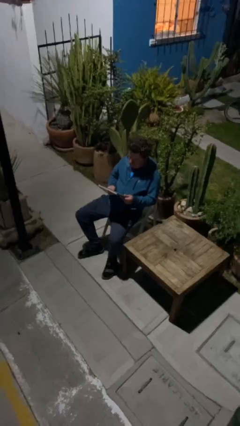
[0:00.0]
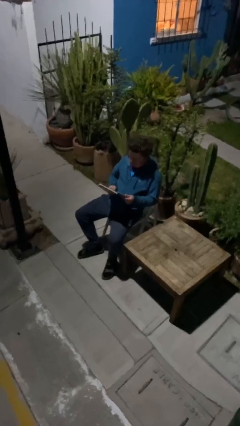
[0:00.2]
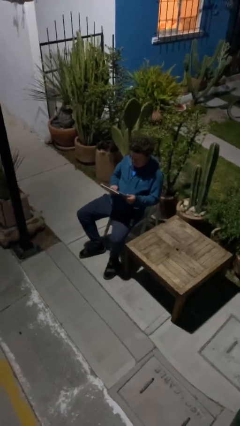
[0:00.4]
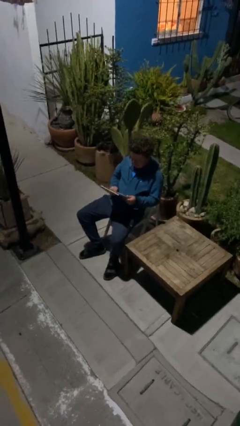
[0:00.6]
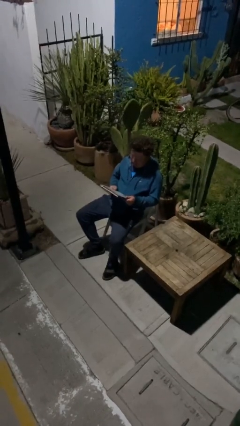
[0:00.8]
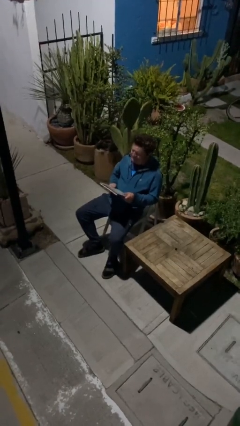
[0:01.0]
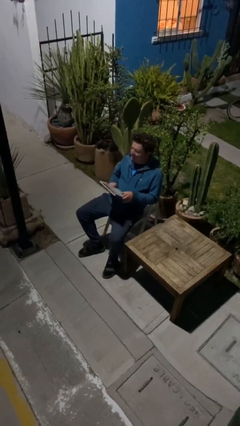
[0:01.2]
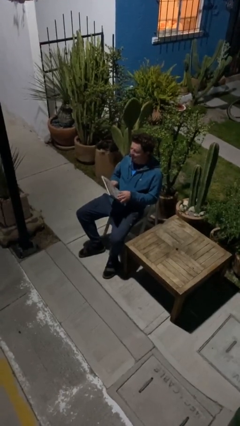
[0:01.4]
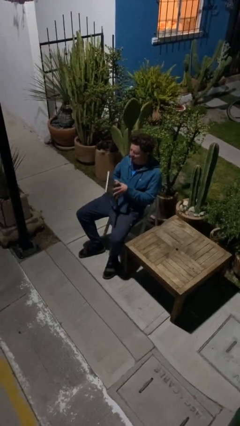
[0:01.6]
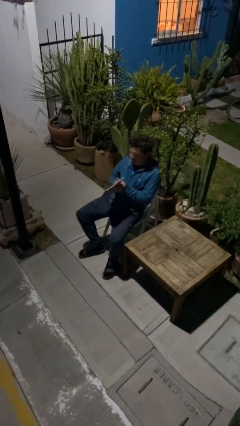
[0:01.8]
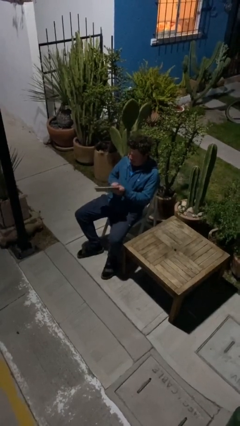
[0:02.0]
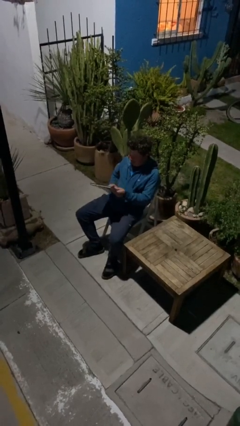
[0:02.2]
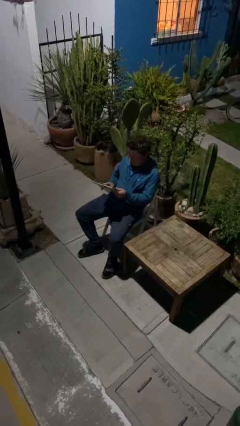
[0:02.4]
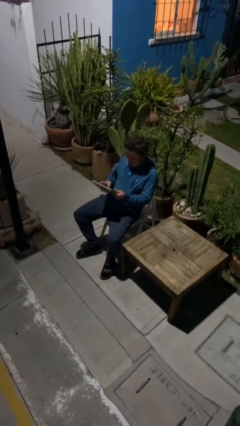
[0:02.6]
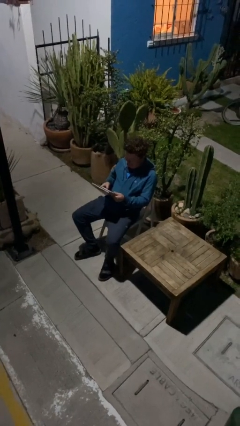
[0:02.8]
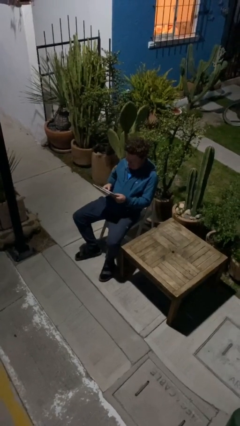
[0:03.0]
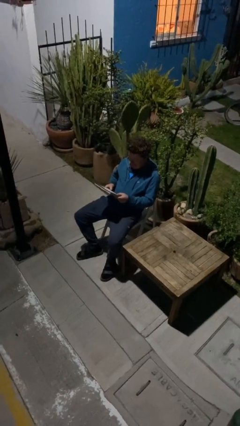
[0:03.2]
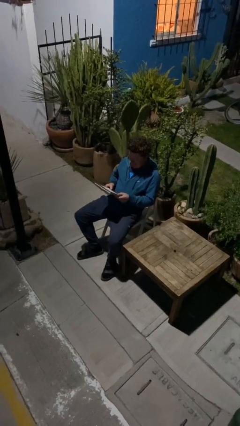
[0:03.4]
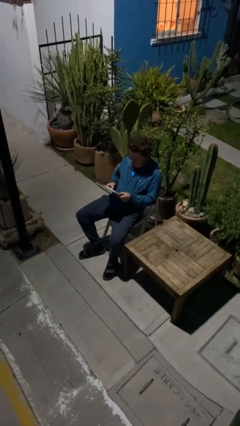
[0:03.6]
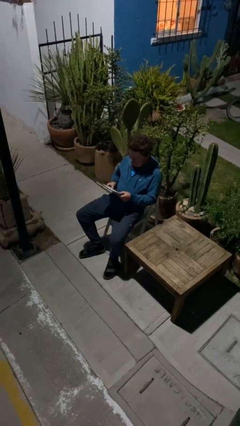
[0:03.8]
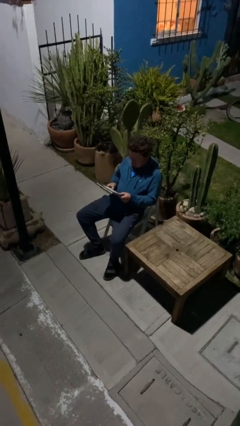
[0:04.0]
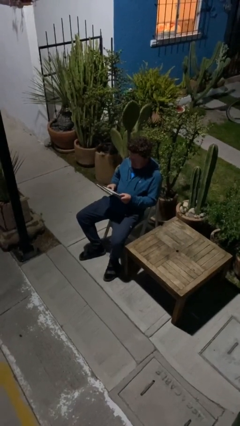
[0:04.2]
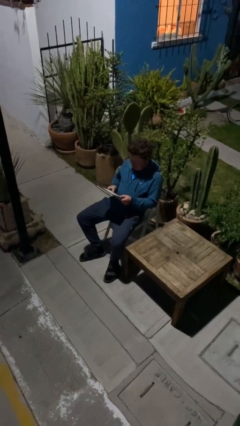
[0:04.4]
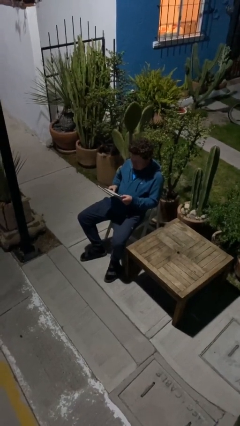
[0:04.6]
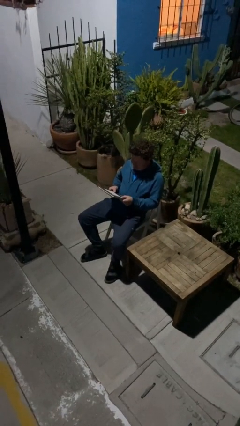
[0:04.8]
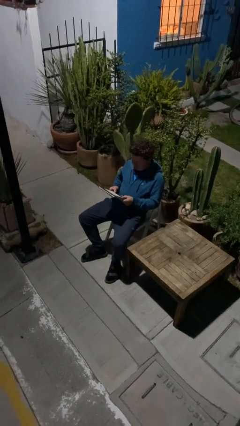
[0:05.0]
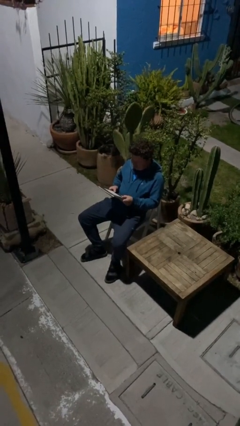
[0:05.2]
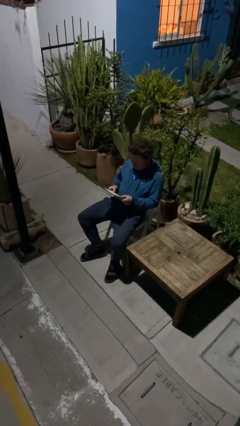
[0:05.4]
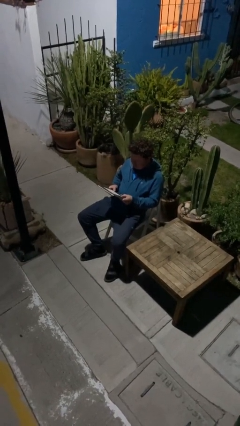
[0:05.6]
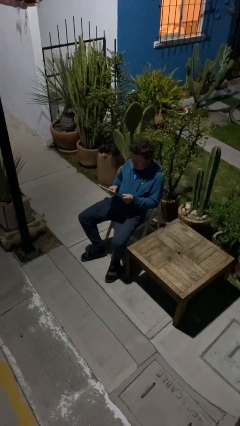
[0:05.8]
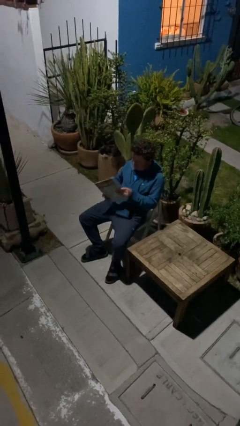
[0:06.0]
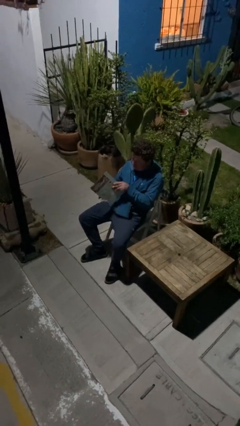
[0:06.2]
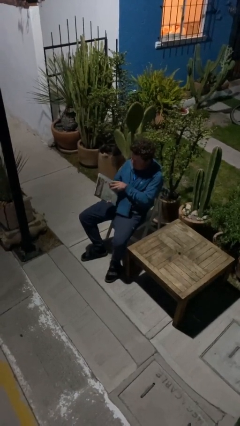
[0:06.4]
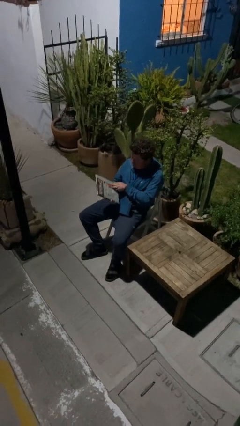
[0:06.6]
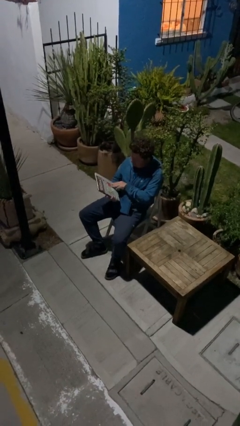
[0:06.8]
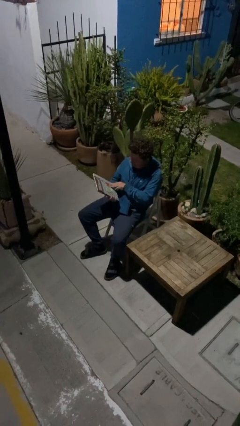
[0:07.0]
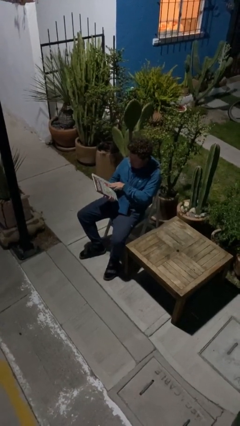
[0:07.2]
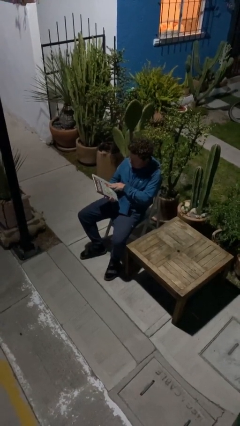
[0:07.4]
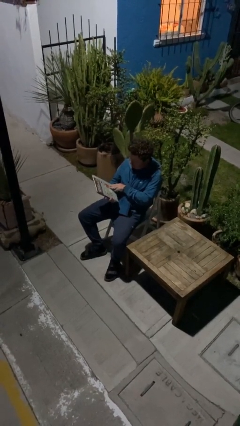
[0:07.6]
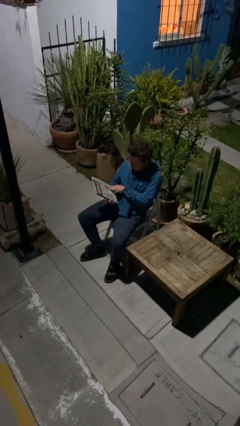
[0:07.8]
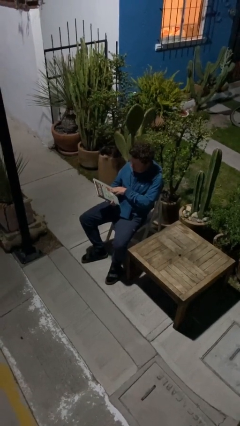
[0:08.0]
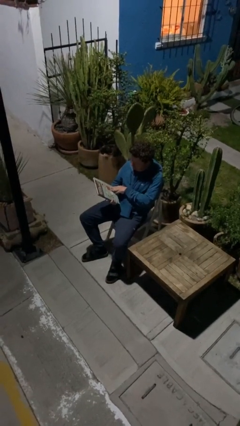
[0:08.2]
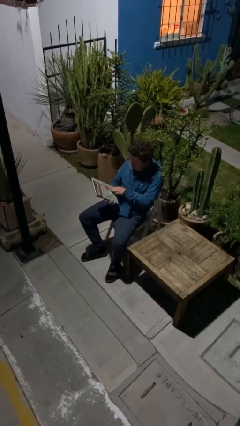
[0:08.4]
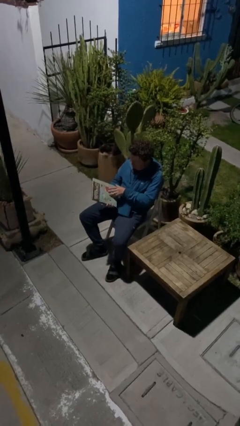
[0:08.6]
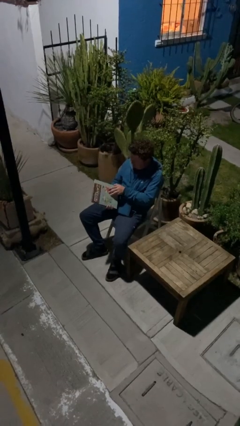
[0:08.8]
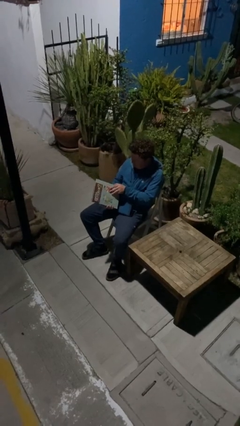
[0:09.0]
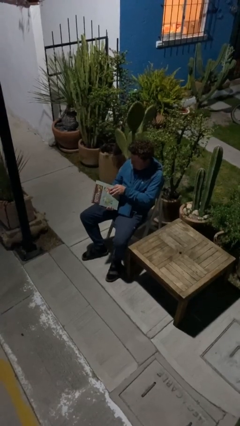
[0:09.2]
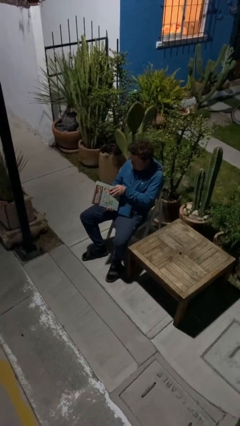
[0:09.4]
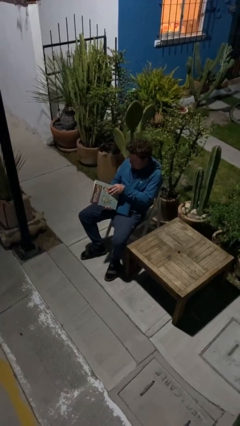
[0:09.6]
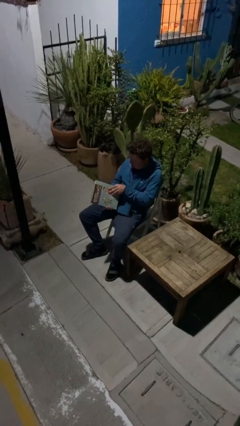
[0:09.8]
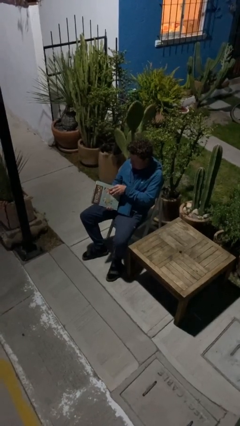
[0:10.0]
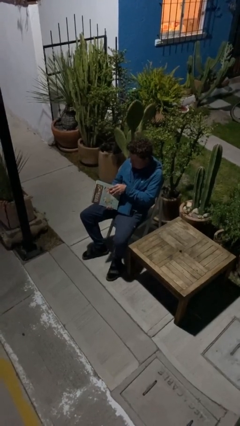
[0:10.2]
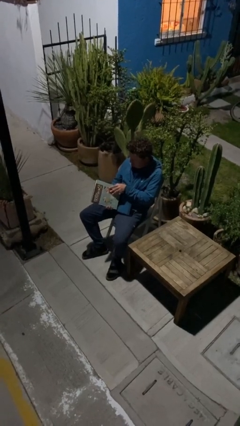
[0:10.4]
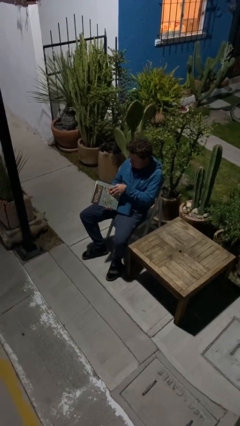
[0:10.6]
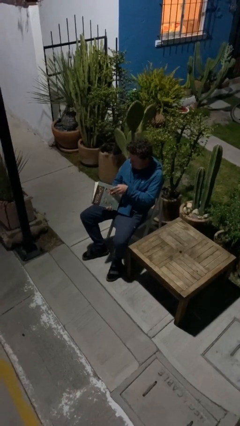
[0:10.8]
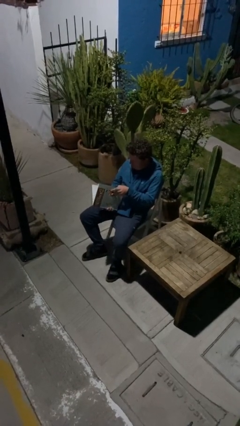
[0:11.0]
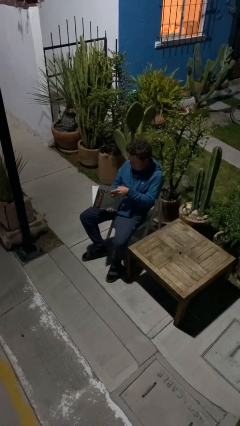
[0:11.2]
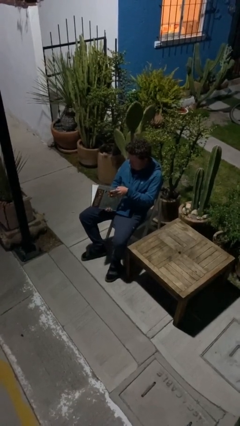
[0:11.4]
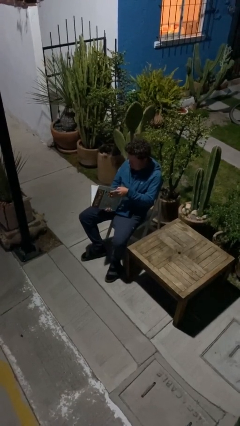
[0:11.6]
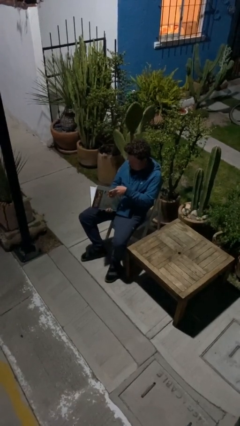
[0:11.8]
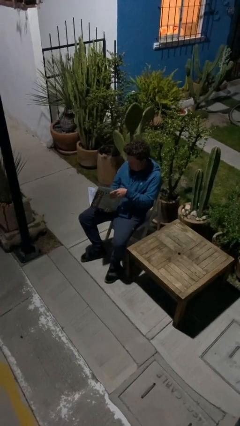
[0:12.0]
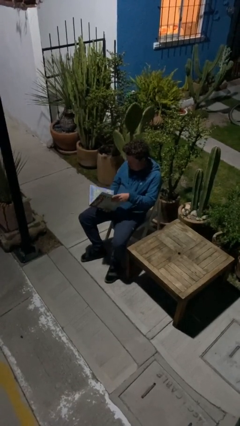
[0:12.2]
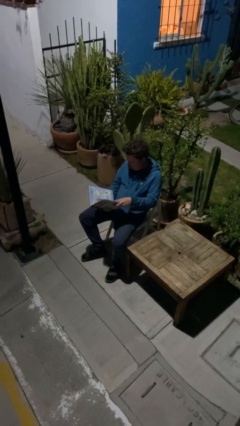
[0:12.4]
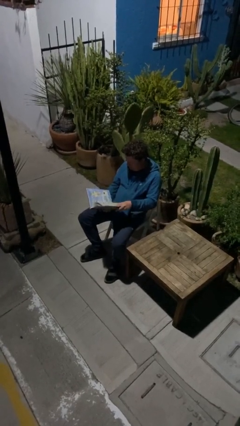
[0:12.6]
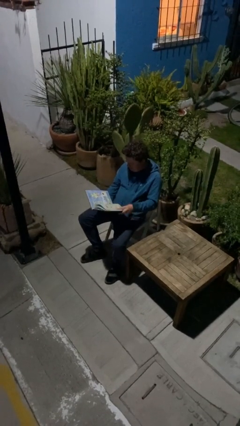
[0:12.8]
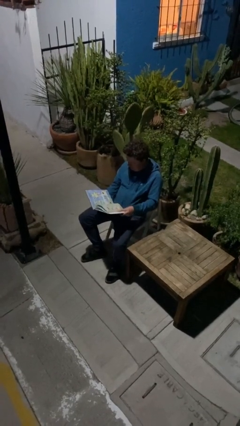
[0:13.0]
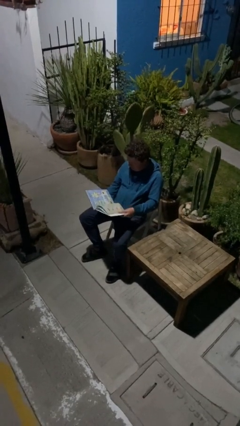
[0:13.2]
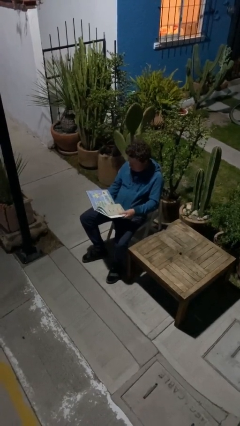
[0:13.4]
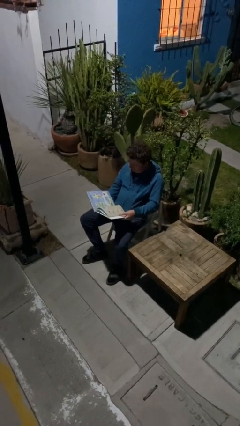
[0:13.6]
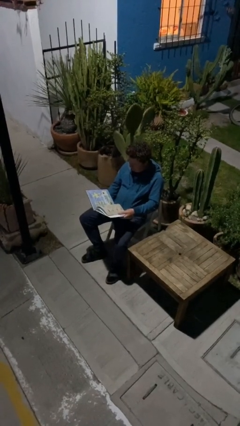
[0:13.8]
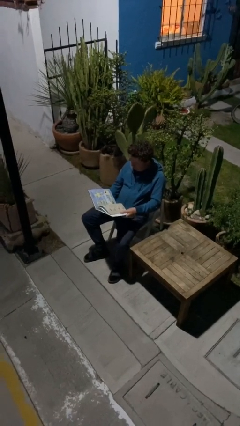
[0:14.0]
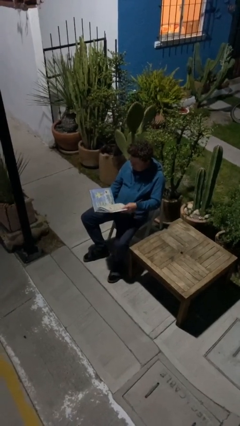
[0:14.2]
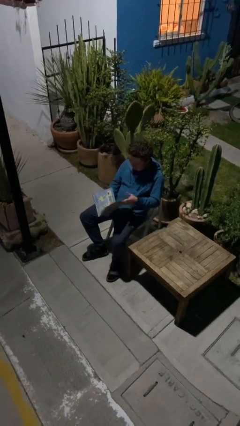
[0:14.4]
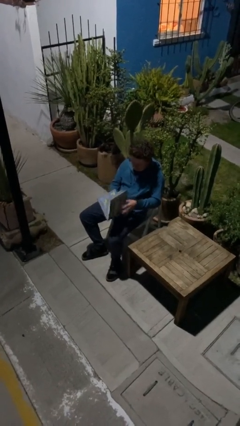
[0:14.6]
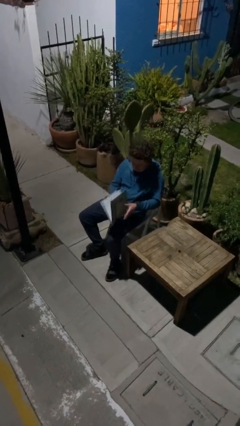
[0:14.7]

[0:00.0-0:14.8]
person reads document

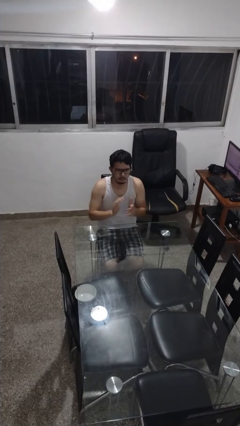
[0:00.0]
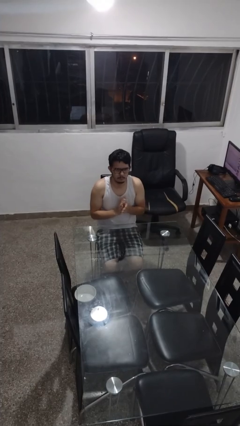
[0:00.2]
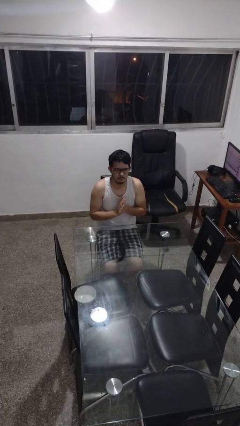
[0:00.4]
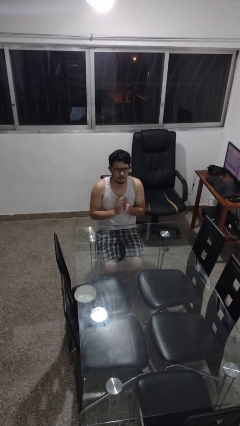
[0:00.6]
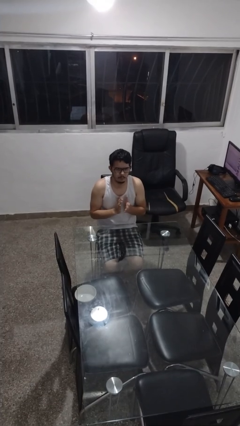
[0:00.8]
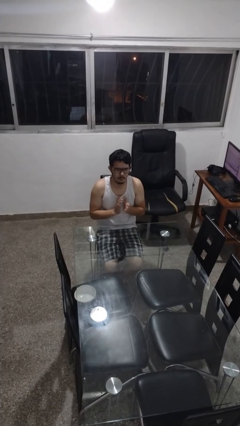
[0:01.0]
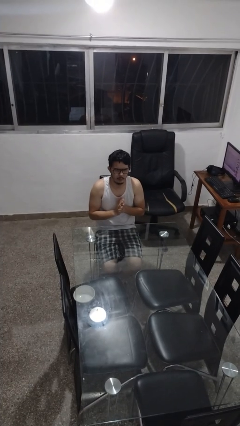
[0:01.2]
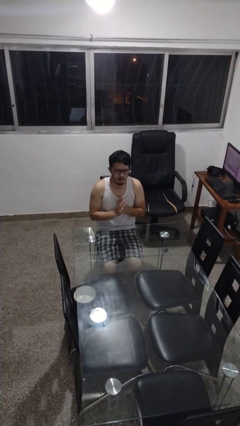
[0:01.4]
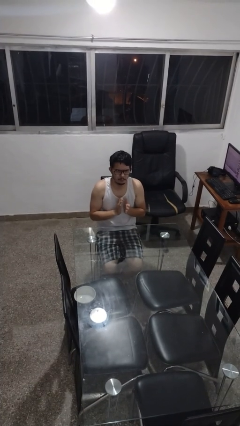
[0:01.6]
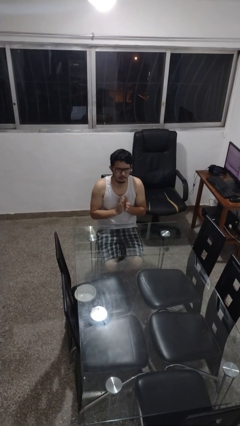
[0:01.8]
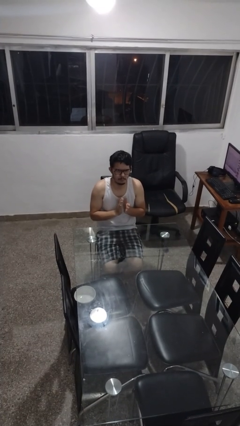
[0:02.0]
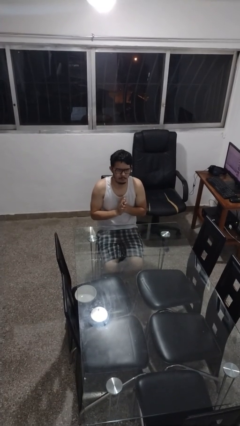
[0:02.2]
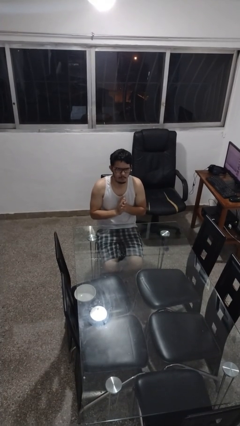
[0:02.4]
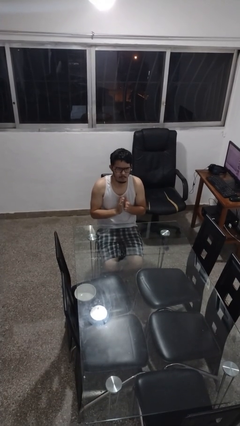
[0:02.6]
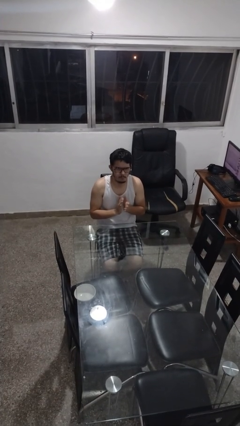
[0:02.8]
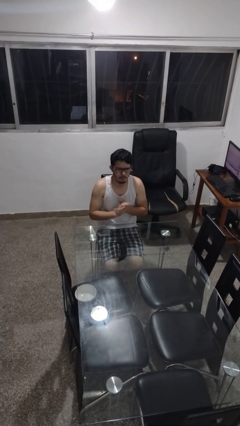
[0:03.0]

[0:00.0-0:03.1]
person claps hands

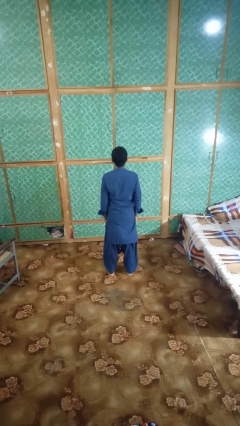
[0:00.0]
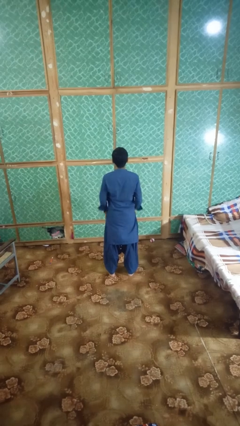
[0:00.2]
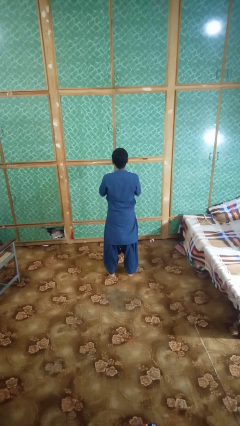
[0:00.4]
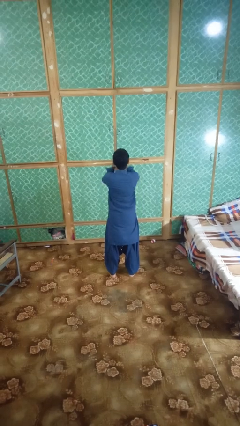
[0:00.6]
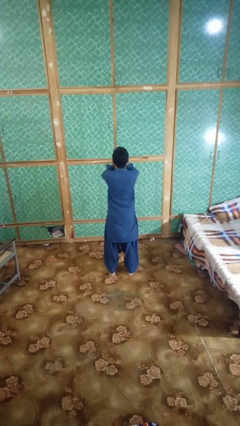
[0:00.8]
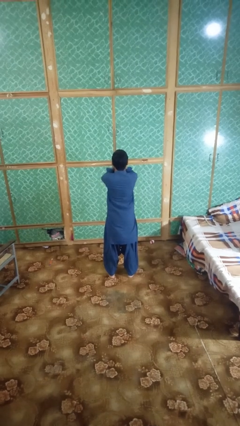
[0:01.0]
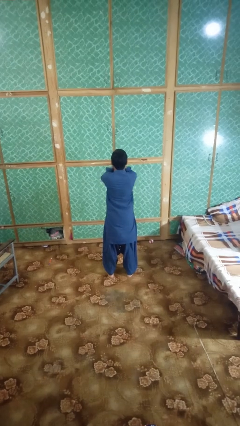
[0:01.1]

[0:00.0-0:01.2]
person covers face with hands
